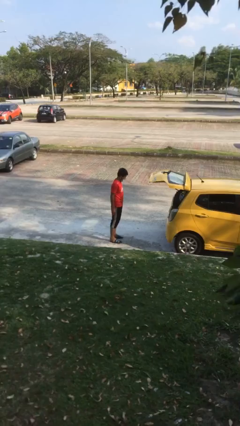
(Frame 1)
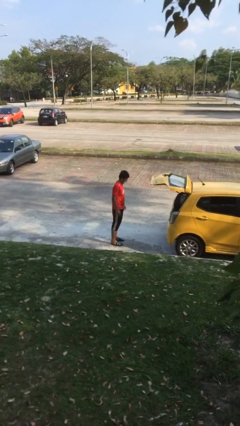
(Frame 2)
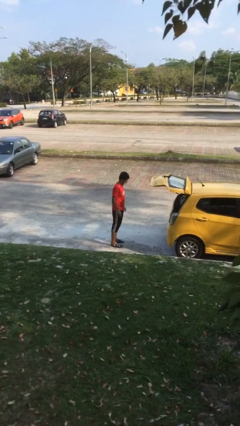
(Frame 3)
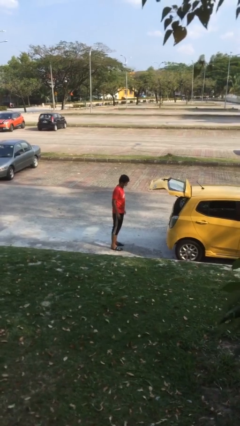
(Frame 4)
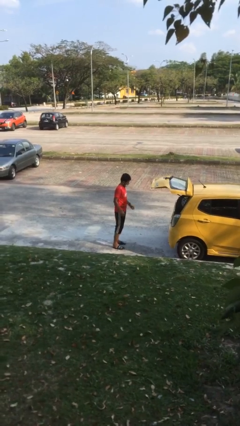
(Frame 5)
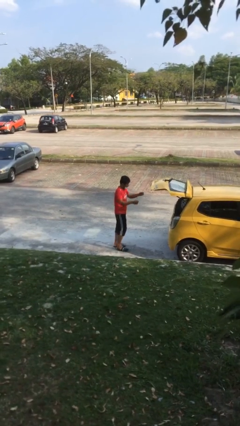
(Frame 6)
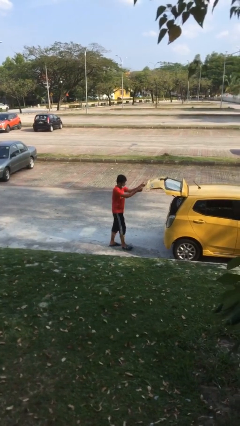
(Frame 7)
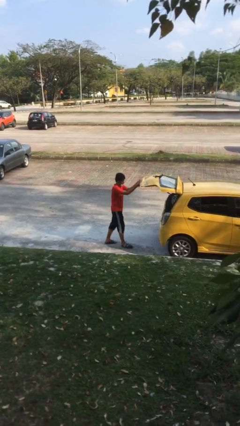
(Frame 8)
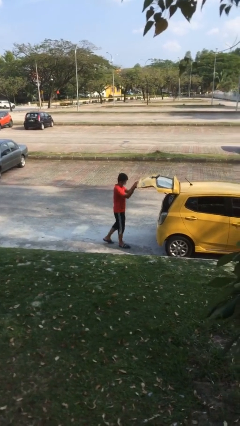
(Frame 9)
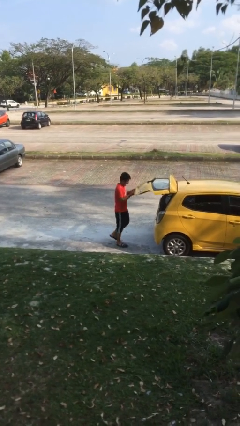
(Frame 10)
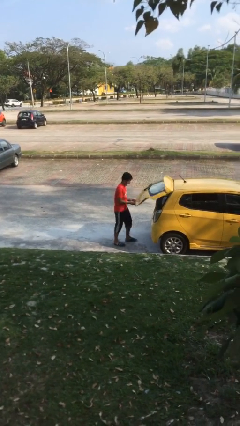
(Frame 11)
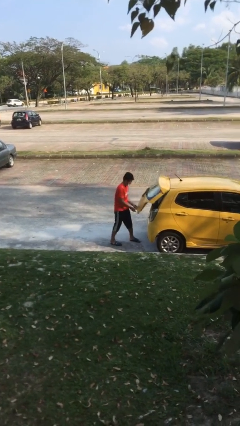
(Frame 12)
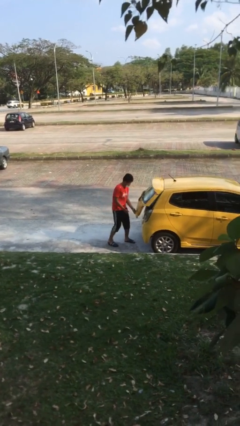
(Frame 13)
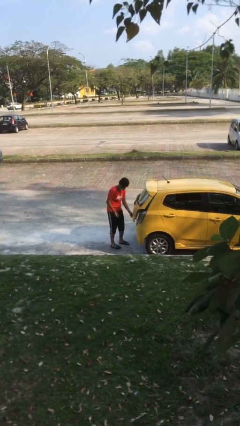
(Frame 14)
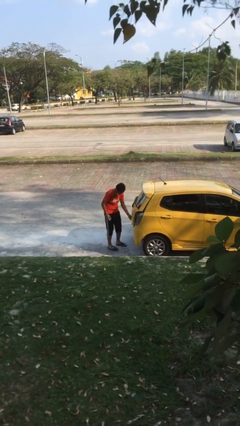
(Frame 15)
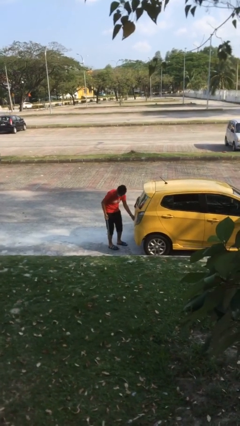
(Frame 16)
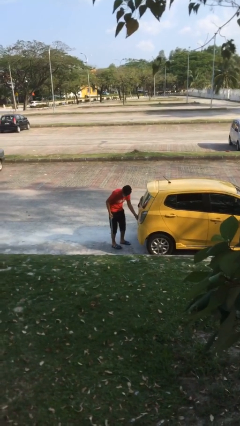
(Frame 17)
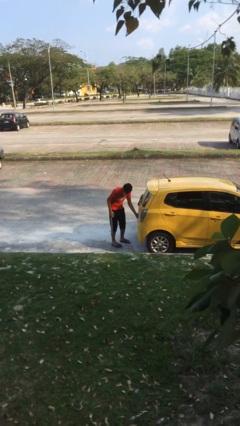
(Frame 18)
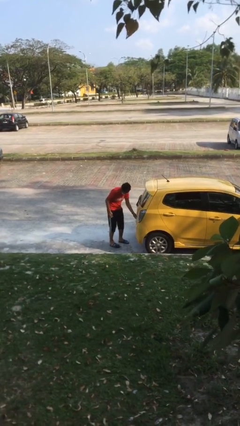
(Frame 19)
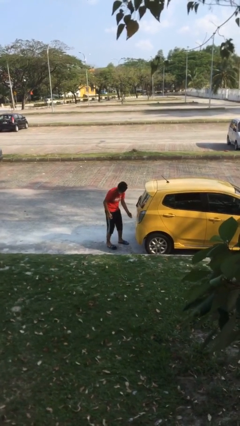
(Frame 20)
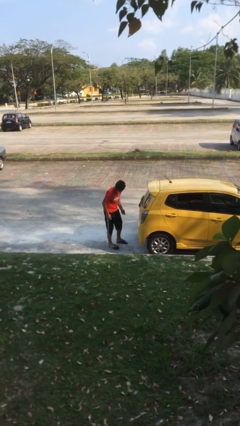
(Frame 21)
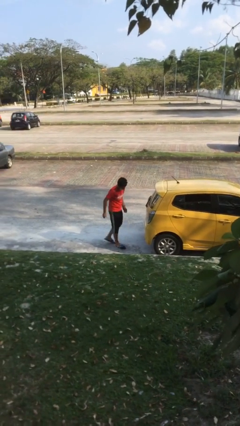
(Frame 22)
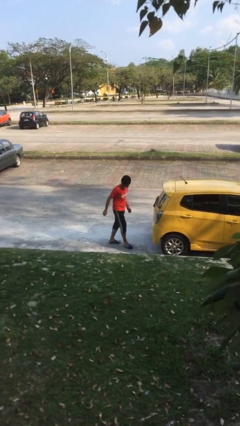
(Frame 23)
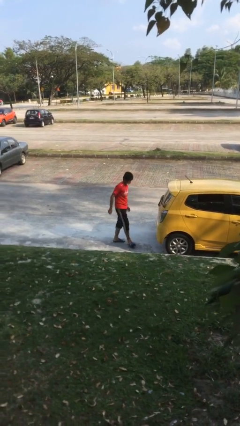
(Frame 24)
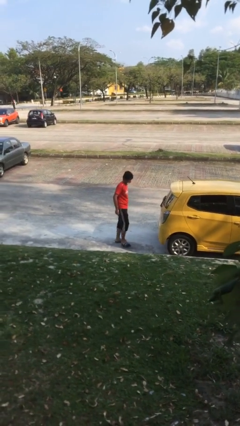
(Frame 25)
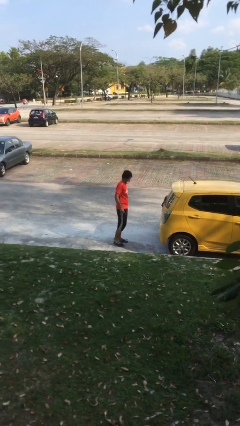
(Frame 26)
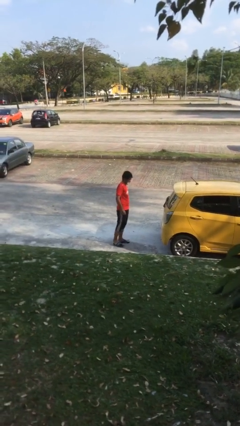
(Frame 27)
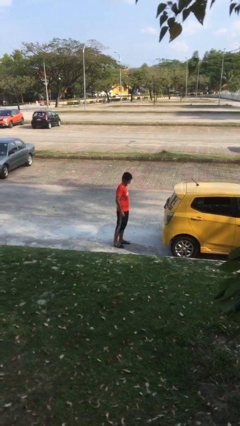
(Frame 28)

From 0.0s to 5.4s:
person closes car trunk

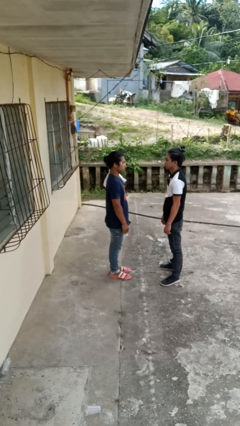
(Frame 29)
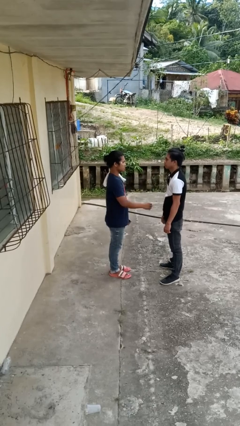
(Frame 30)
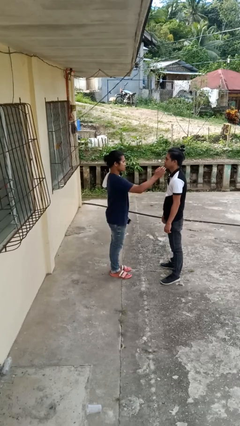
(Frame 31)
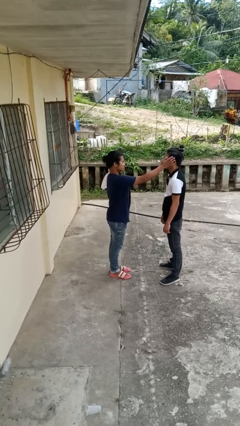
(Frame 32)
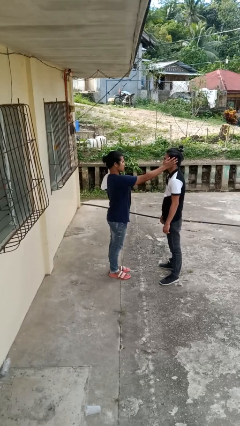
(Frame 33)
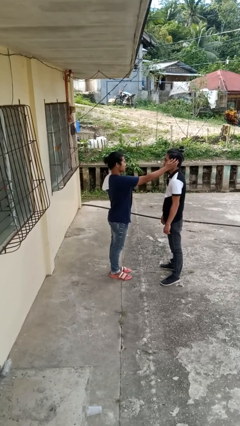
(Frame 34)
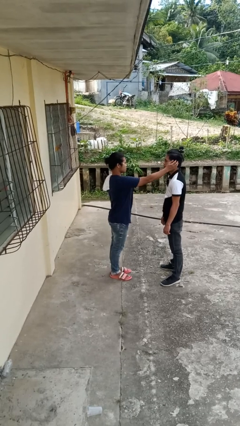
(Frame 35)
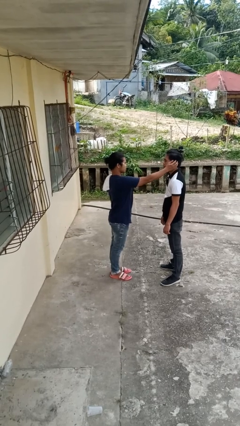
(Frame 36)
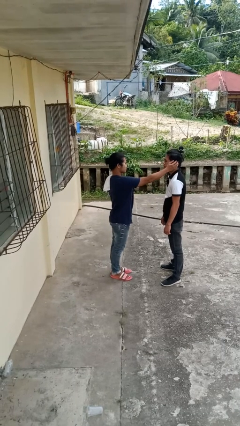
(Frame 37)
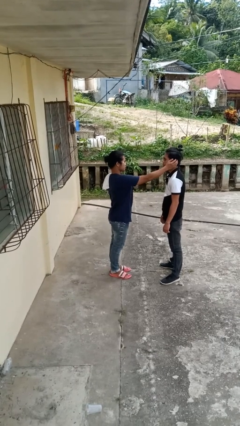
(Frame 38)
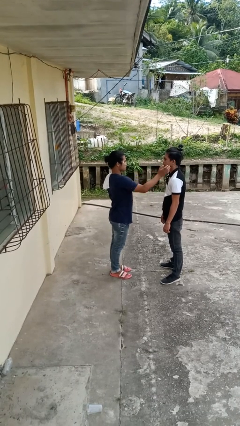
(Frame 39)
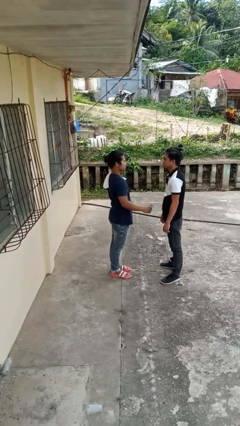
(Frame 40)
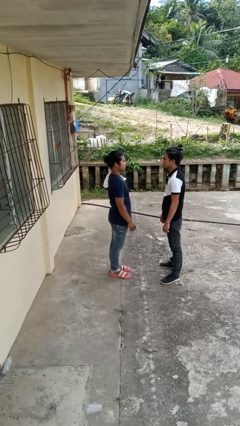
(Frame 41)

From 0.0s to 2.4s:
person touches face of person

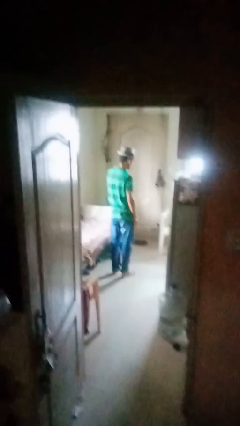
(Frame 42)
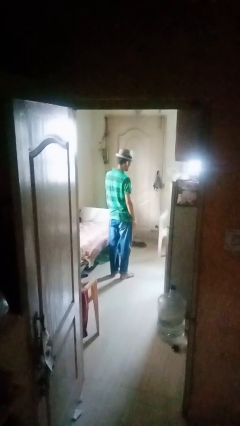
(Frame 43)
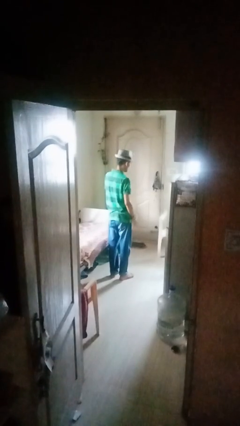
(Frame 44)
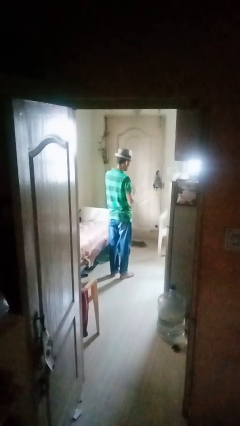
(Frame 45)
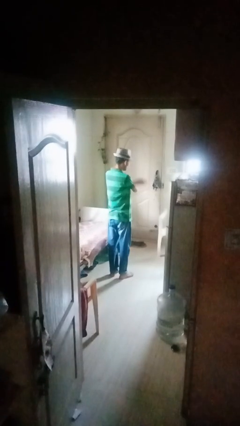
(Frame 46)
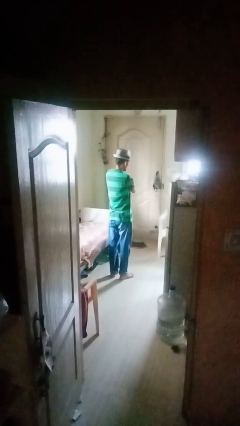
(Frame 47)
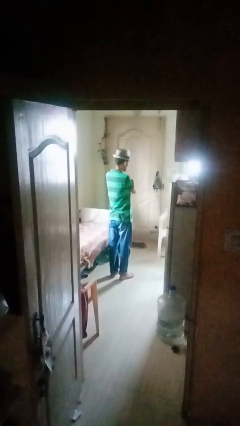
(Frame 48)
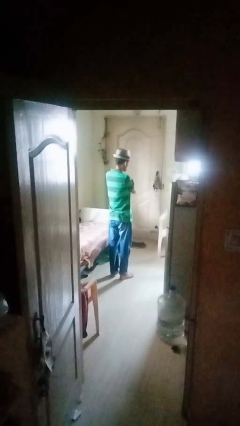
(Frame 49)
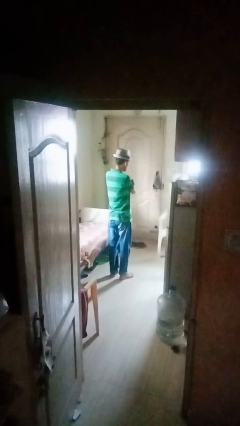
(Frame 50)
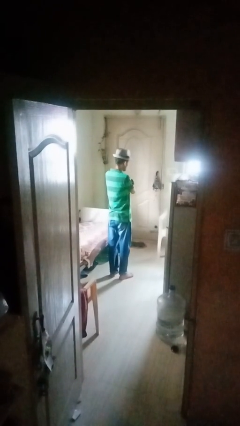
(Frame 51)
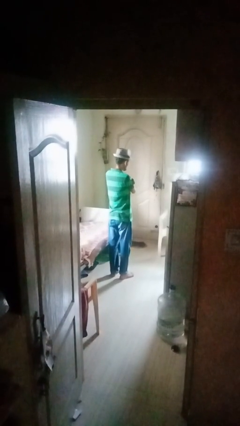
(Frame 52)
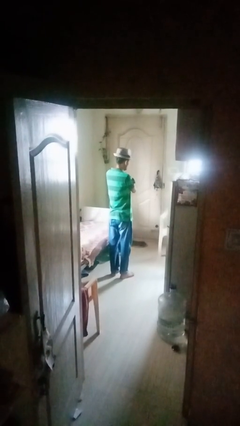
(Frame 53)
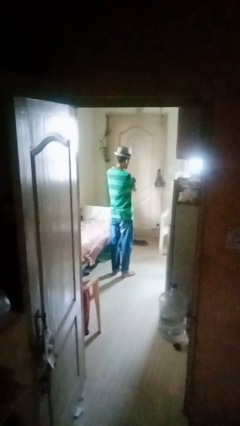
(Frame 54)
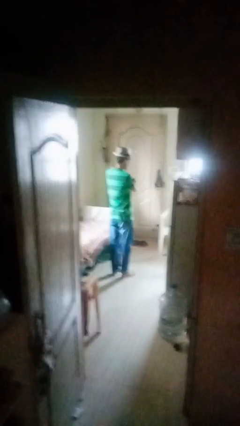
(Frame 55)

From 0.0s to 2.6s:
person gestures arms x

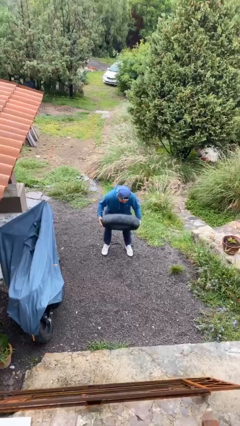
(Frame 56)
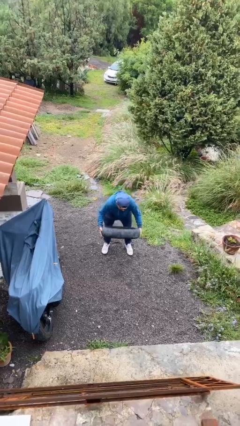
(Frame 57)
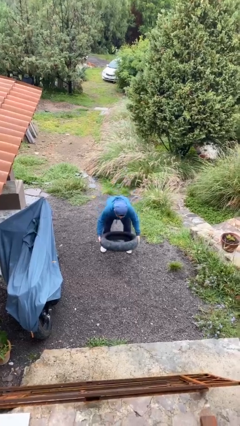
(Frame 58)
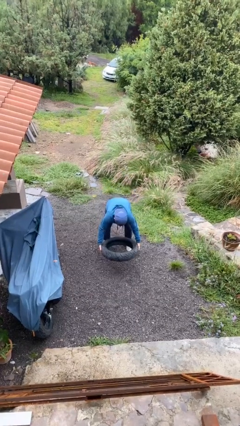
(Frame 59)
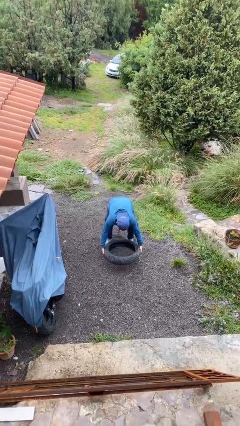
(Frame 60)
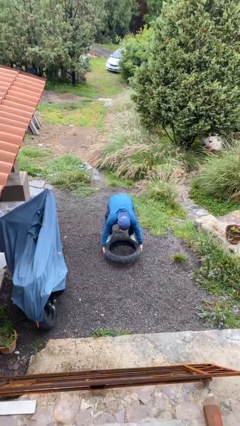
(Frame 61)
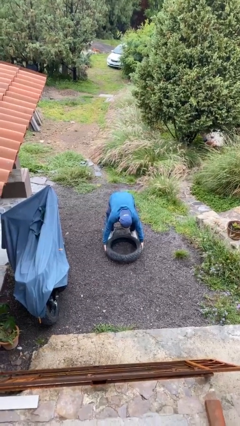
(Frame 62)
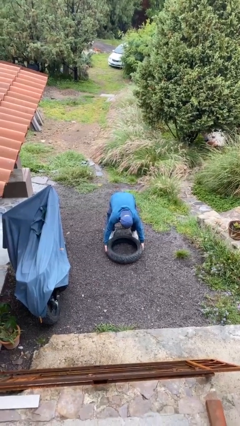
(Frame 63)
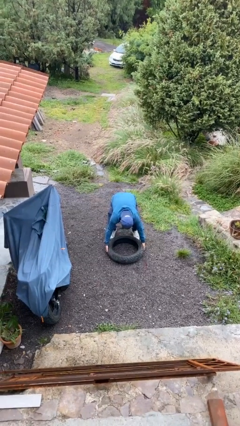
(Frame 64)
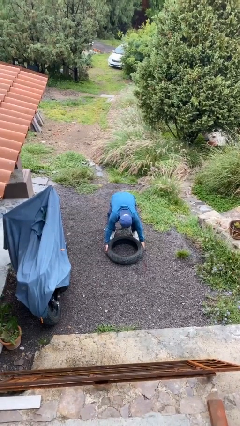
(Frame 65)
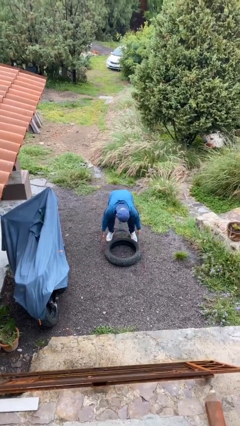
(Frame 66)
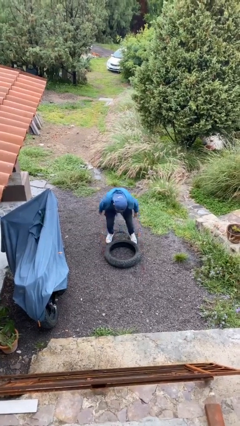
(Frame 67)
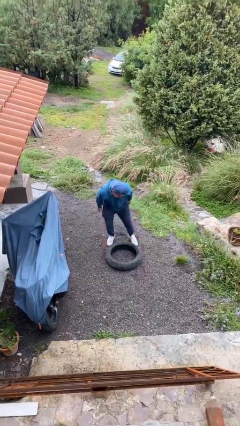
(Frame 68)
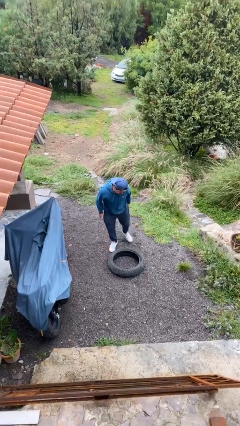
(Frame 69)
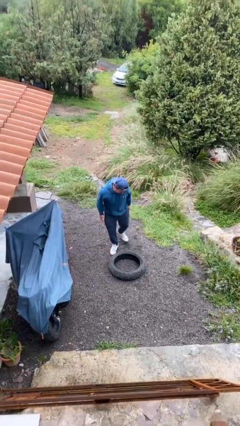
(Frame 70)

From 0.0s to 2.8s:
person puts down object on floor

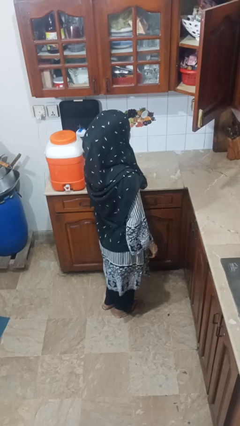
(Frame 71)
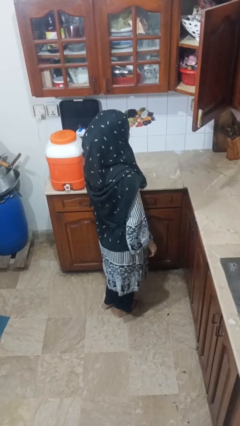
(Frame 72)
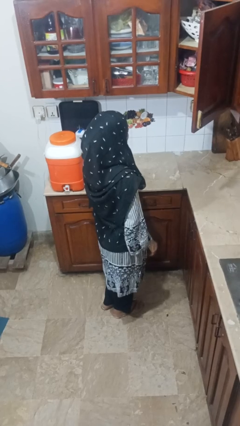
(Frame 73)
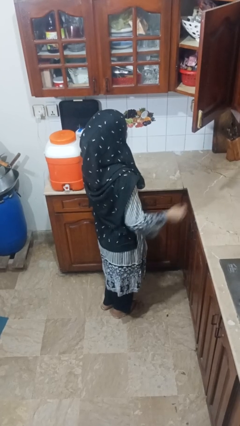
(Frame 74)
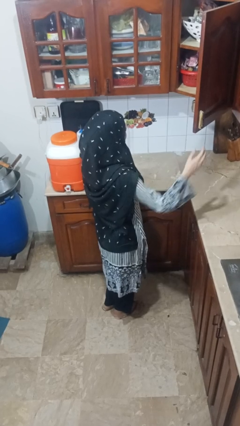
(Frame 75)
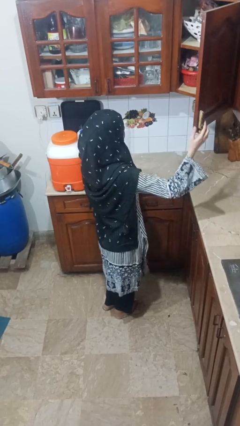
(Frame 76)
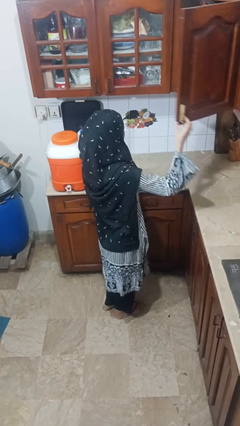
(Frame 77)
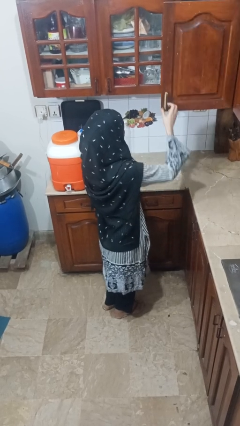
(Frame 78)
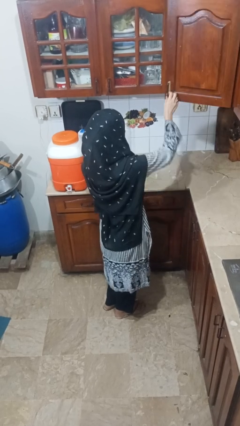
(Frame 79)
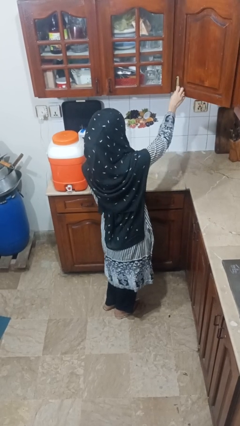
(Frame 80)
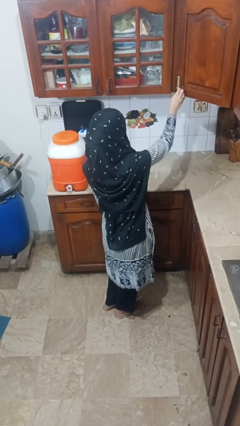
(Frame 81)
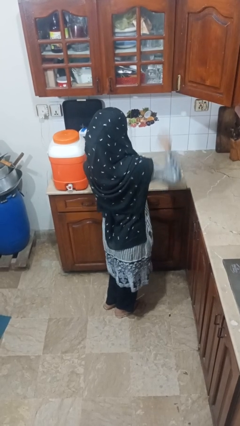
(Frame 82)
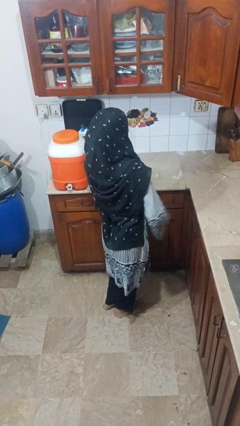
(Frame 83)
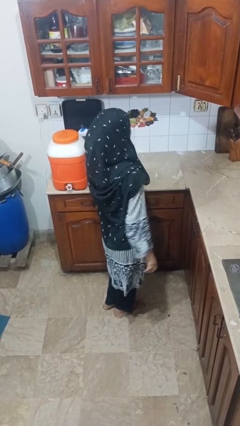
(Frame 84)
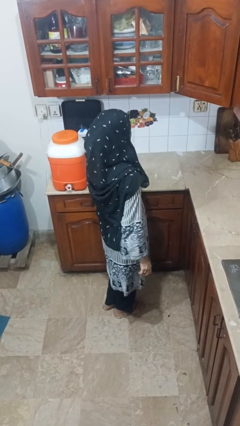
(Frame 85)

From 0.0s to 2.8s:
person closes cabinet

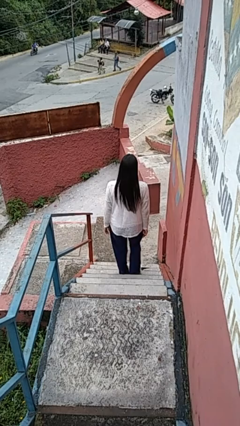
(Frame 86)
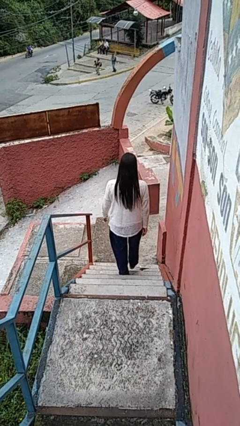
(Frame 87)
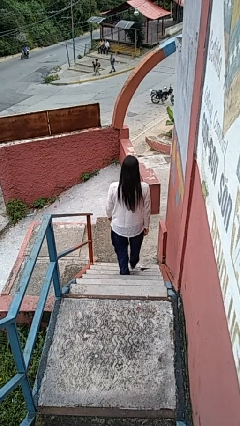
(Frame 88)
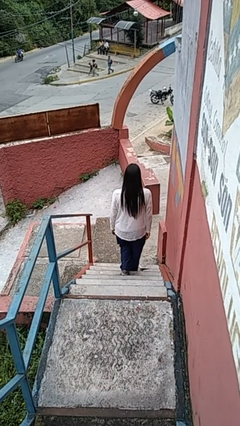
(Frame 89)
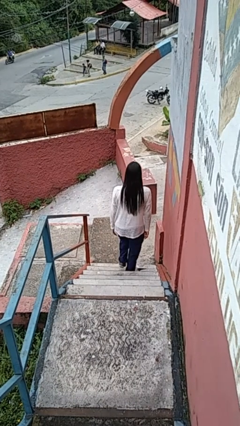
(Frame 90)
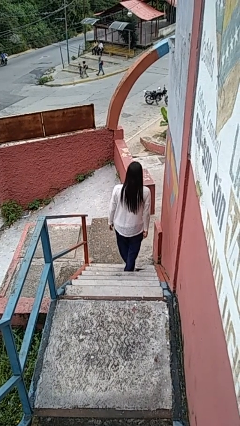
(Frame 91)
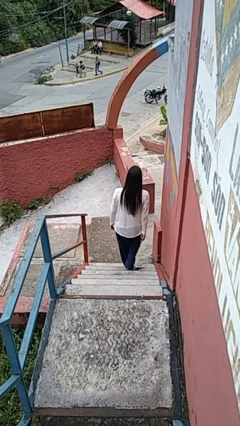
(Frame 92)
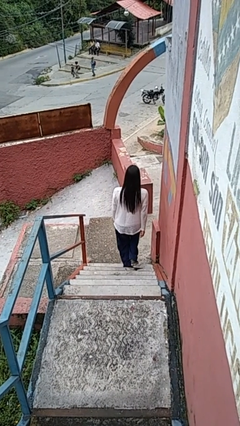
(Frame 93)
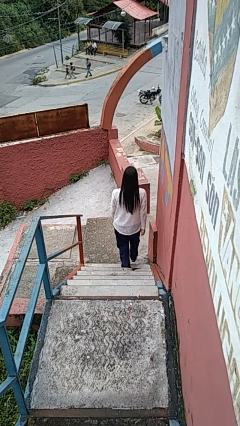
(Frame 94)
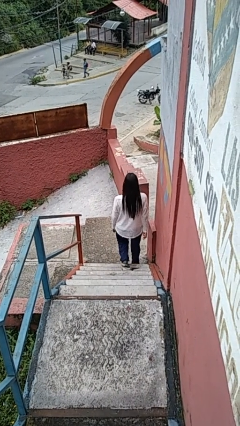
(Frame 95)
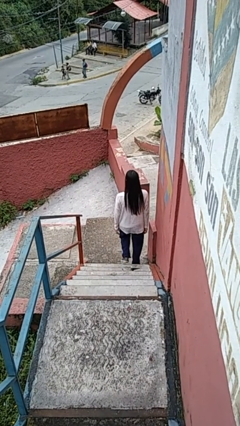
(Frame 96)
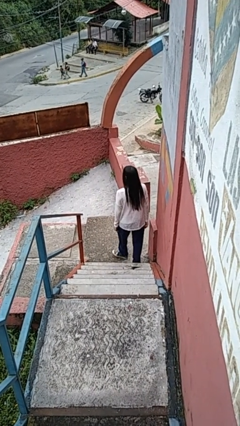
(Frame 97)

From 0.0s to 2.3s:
person climbs down stairs
